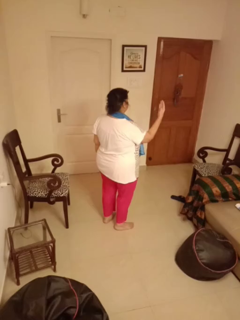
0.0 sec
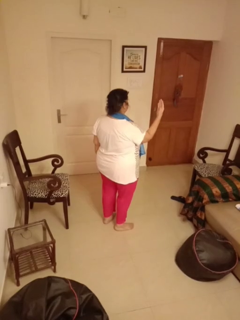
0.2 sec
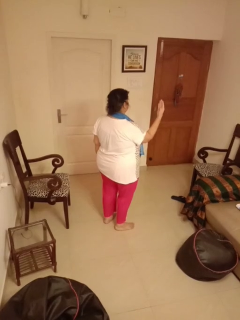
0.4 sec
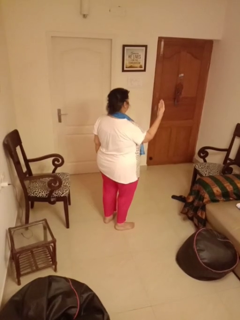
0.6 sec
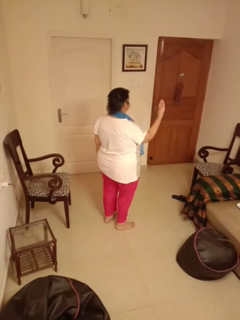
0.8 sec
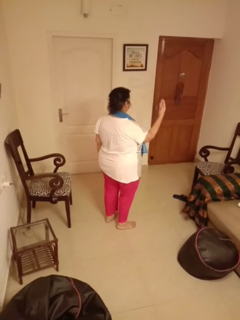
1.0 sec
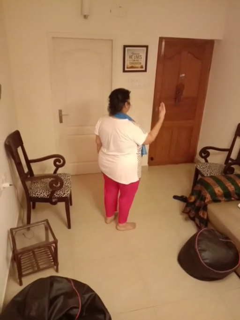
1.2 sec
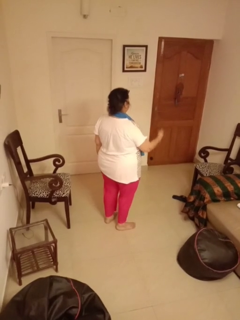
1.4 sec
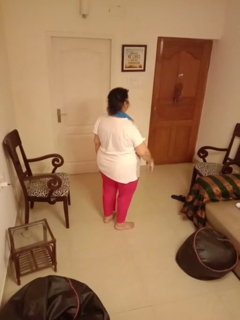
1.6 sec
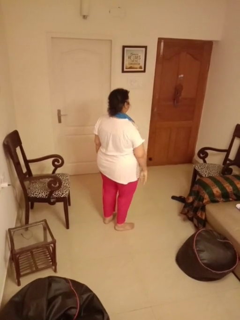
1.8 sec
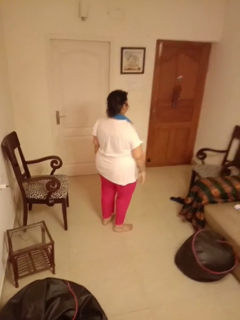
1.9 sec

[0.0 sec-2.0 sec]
person gestures number four

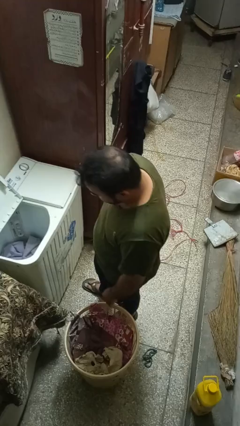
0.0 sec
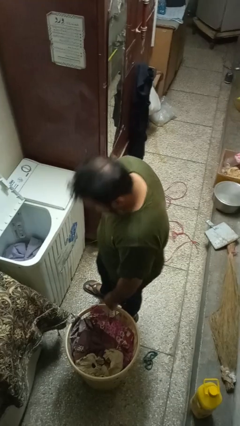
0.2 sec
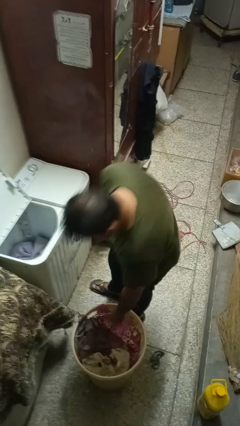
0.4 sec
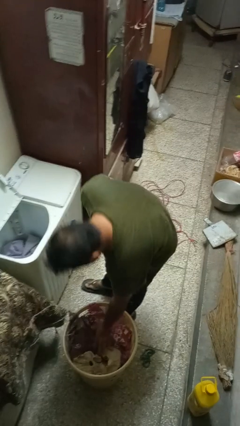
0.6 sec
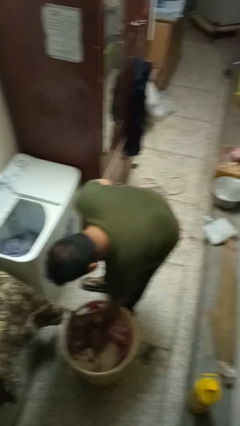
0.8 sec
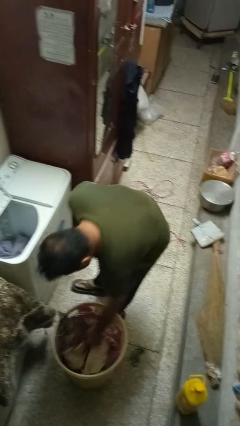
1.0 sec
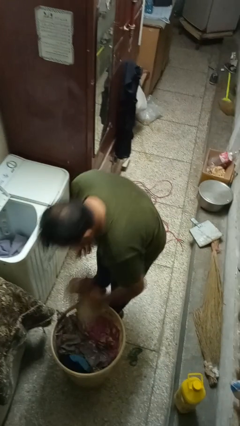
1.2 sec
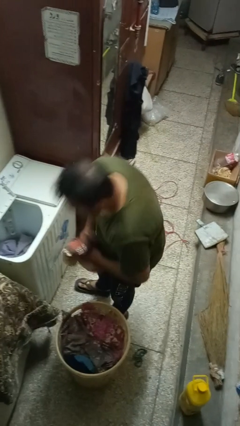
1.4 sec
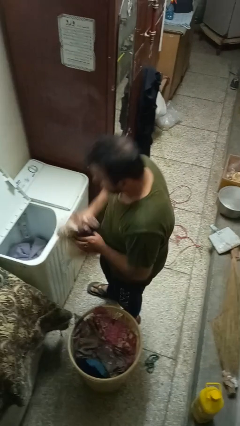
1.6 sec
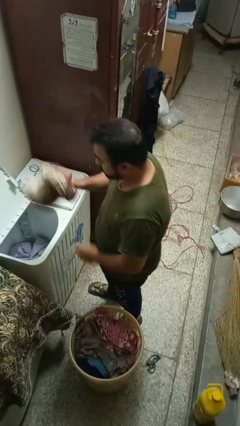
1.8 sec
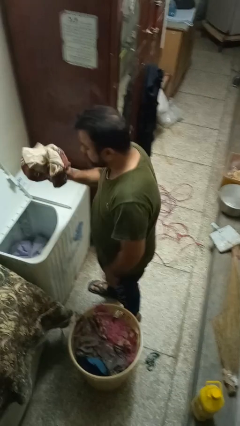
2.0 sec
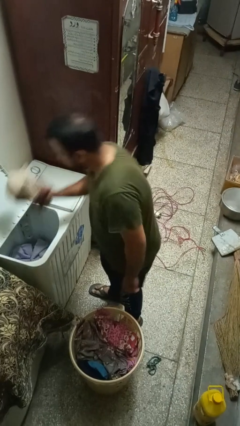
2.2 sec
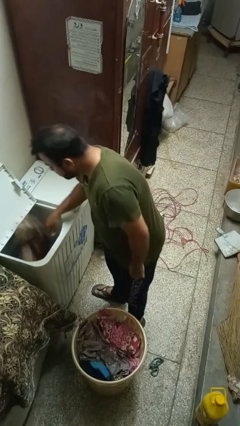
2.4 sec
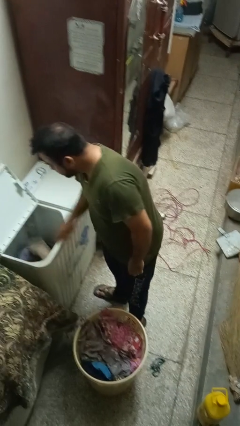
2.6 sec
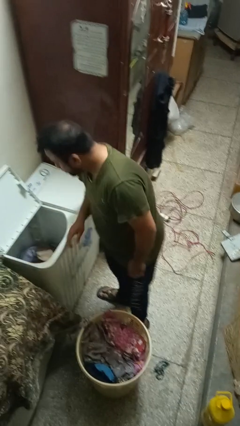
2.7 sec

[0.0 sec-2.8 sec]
person loads clotheswasher

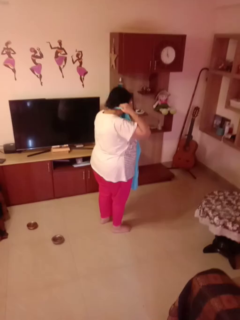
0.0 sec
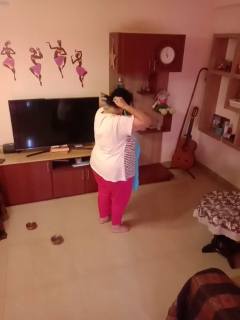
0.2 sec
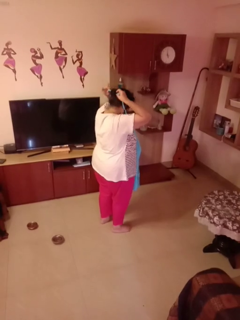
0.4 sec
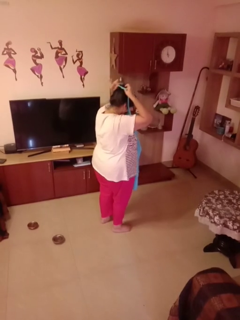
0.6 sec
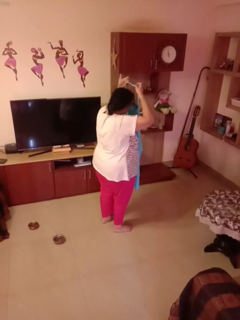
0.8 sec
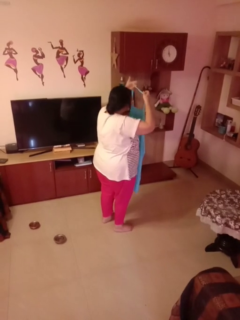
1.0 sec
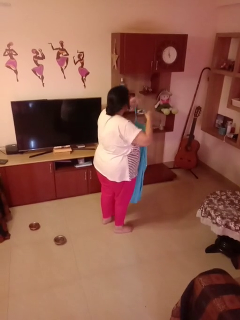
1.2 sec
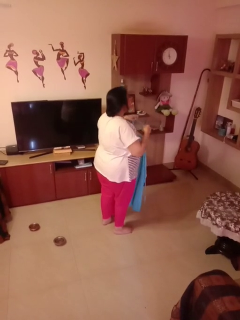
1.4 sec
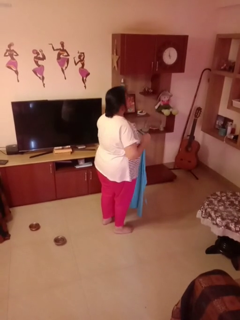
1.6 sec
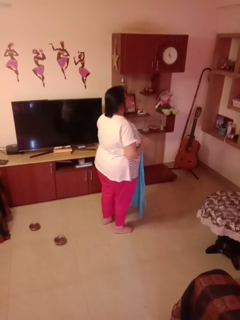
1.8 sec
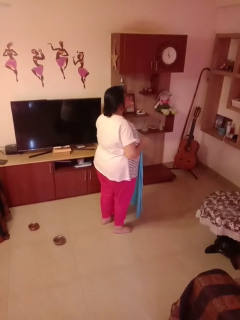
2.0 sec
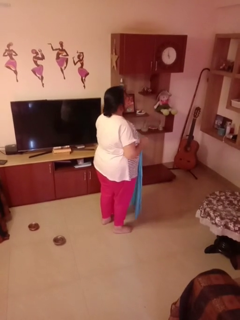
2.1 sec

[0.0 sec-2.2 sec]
person takes off apron

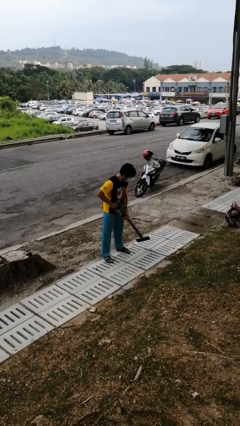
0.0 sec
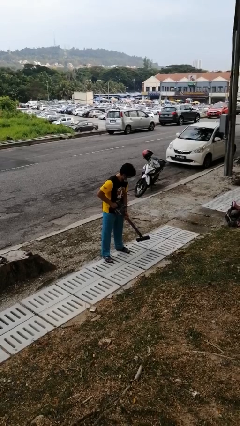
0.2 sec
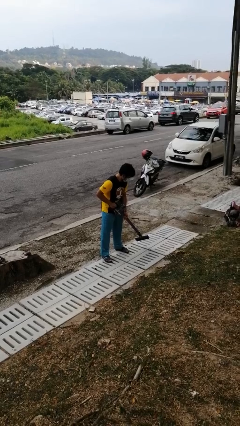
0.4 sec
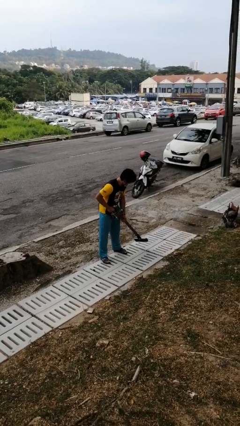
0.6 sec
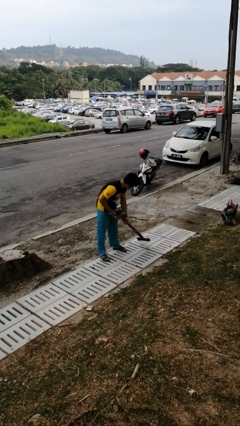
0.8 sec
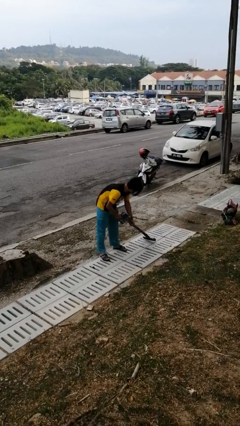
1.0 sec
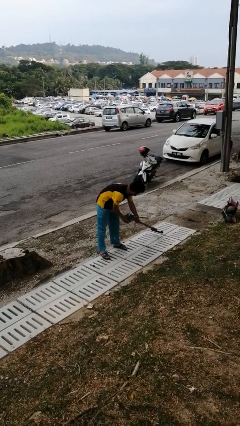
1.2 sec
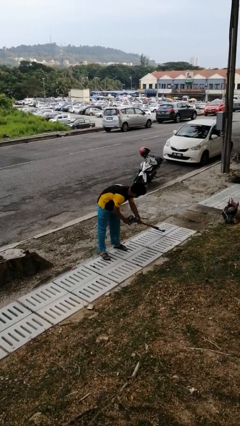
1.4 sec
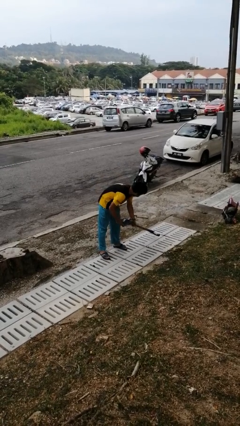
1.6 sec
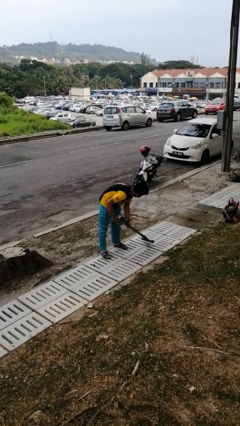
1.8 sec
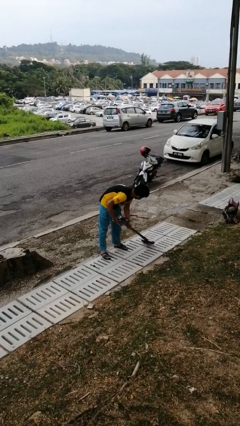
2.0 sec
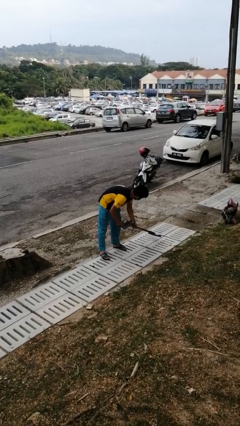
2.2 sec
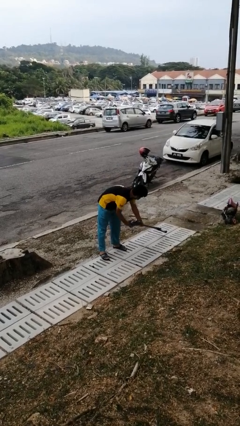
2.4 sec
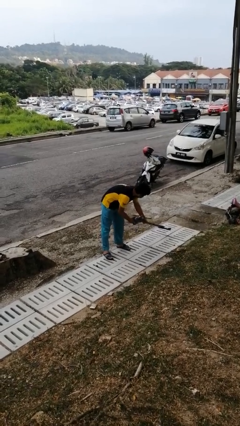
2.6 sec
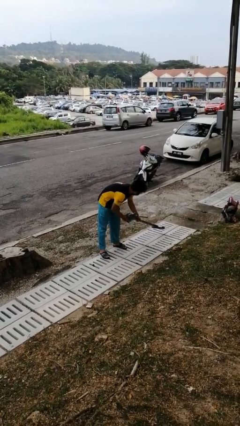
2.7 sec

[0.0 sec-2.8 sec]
person vacuums carpet

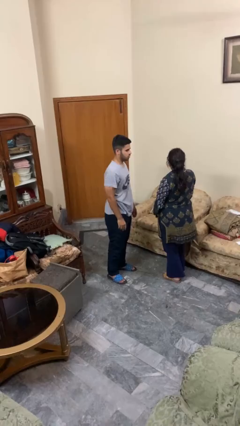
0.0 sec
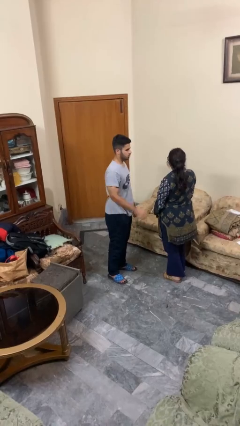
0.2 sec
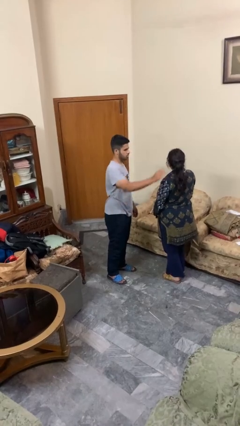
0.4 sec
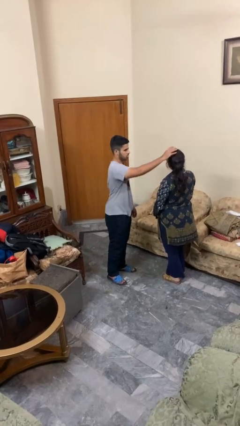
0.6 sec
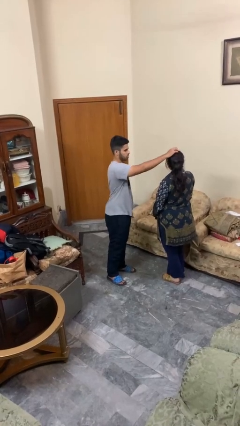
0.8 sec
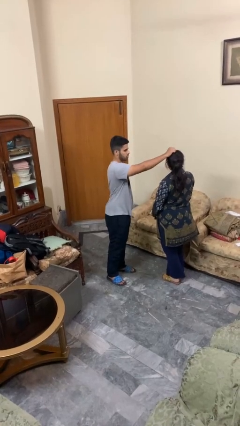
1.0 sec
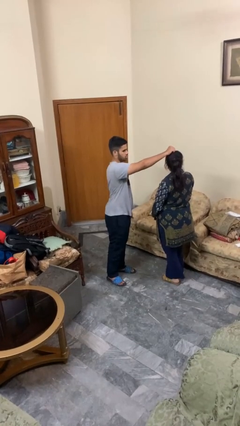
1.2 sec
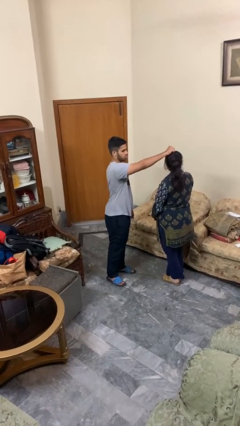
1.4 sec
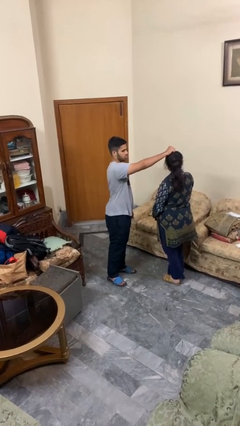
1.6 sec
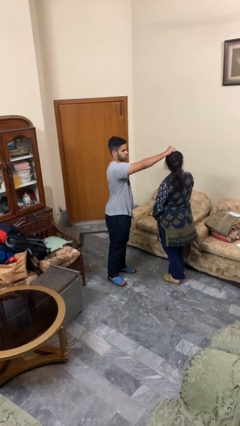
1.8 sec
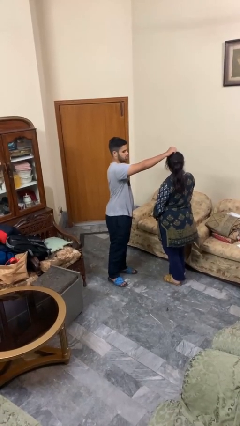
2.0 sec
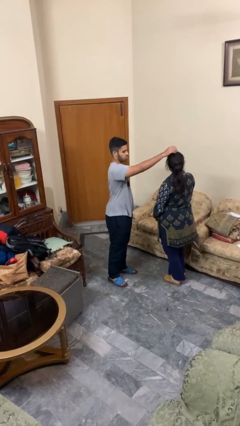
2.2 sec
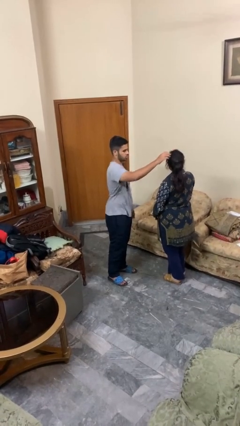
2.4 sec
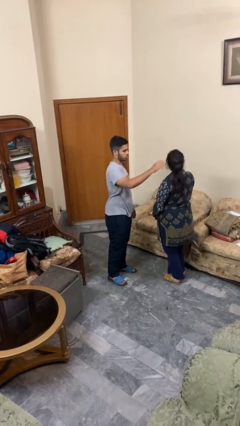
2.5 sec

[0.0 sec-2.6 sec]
person grabs person by hair

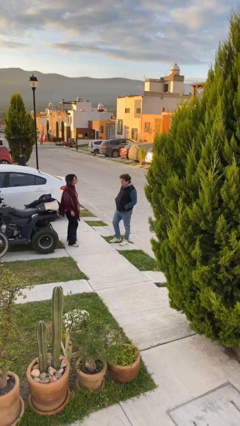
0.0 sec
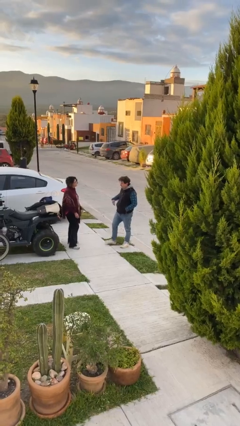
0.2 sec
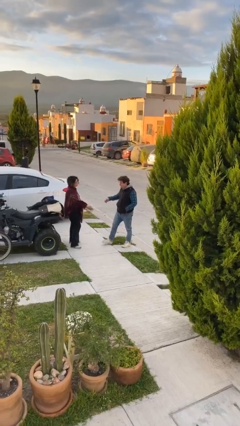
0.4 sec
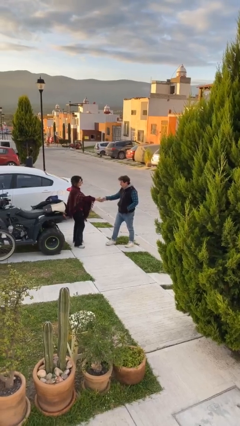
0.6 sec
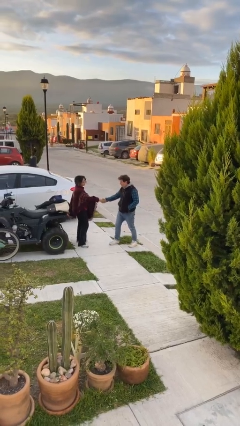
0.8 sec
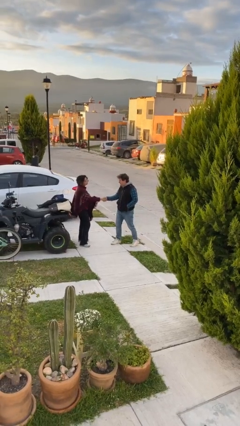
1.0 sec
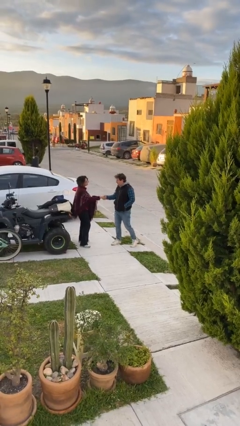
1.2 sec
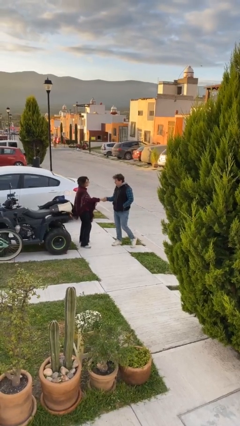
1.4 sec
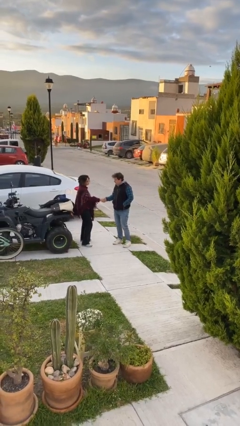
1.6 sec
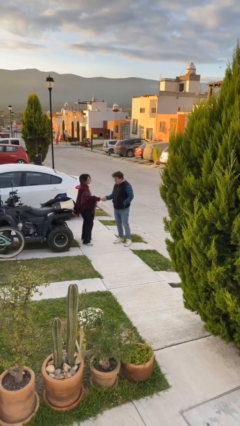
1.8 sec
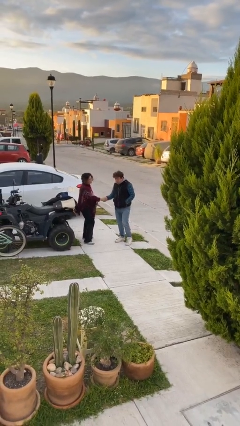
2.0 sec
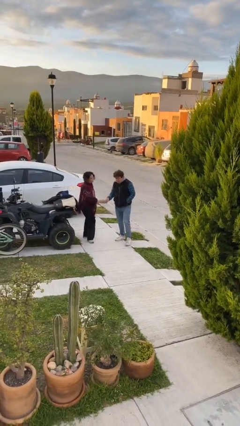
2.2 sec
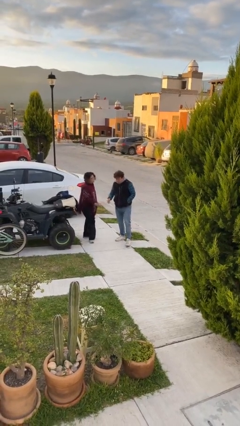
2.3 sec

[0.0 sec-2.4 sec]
person shakes hand

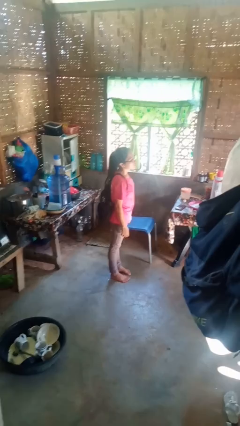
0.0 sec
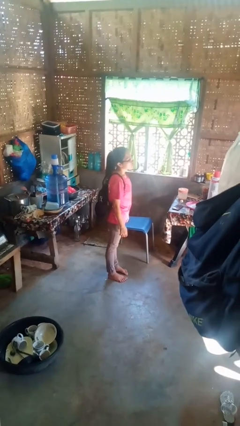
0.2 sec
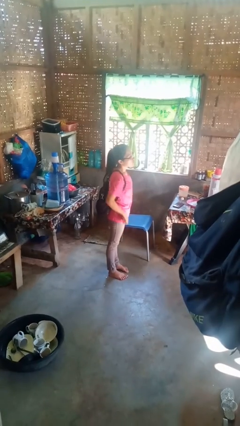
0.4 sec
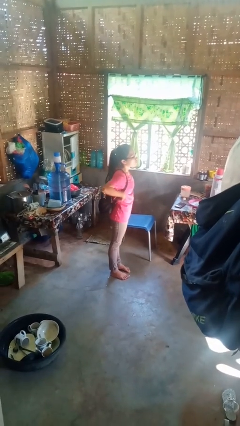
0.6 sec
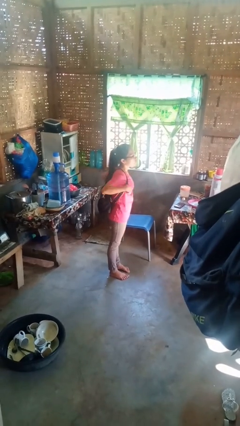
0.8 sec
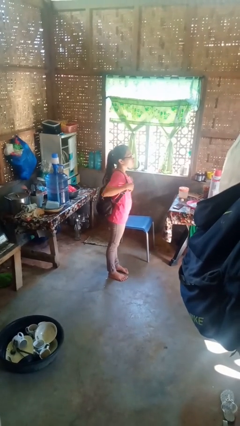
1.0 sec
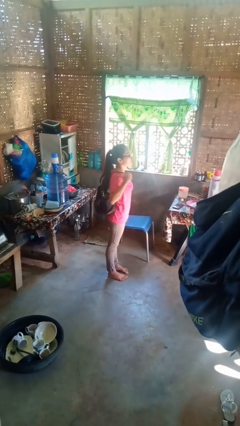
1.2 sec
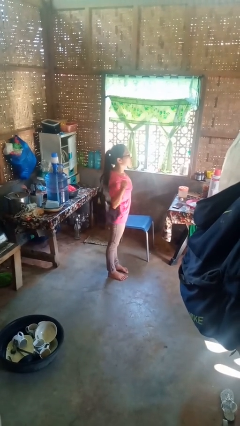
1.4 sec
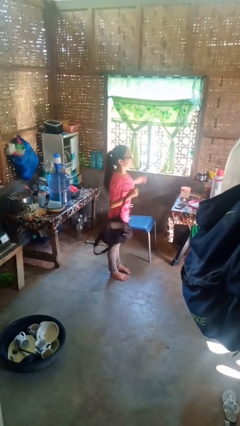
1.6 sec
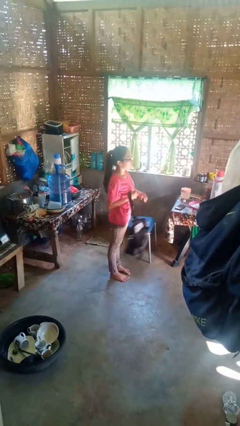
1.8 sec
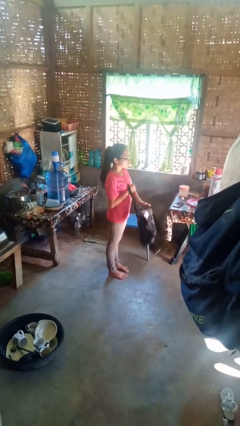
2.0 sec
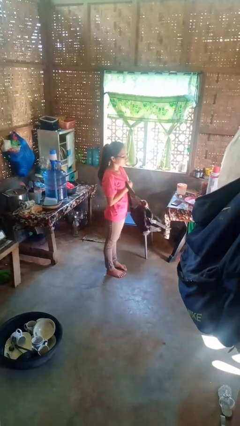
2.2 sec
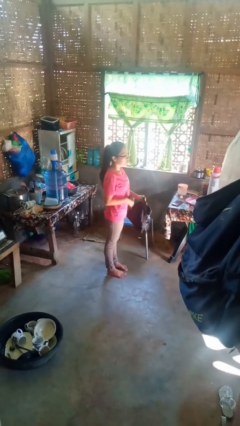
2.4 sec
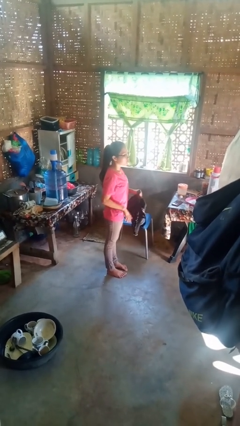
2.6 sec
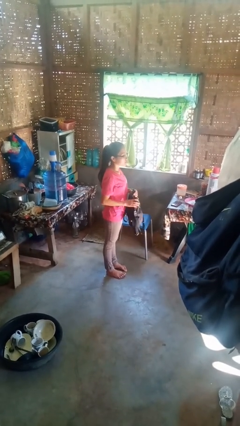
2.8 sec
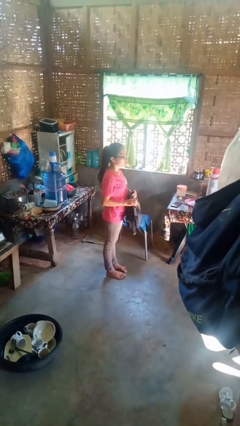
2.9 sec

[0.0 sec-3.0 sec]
person takes off backpack

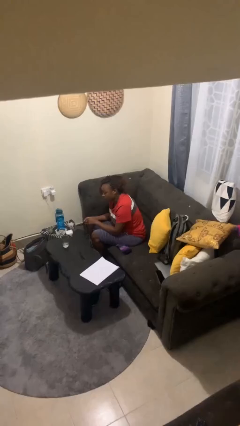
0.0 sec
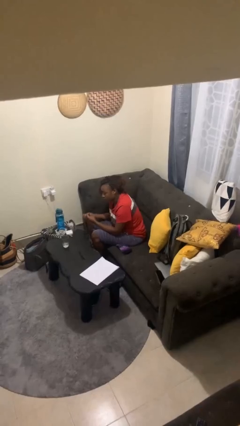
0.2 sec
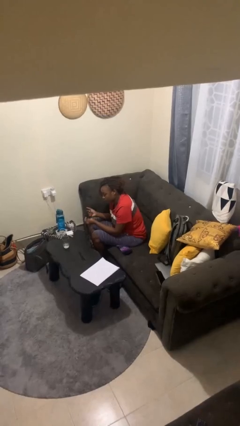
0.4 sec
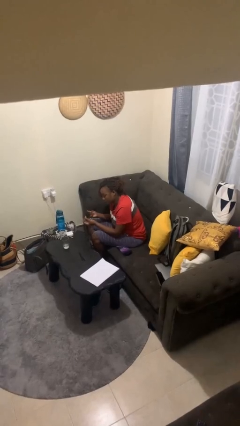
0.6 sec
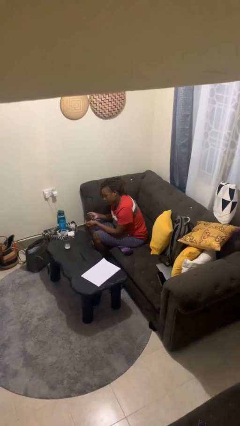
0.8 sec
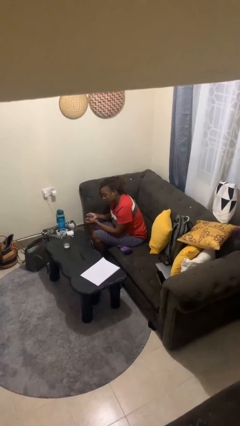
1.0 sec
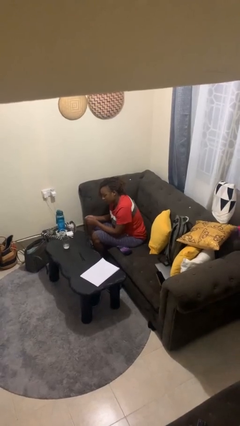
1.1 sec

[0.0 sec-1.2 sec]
person snaps fingers
